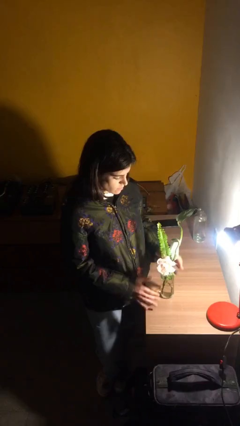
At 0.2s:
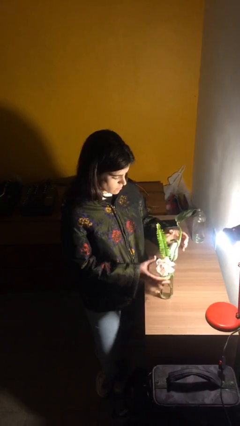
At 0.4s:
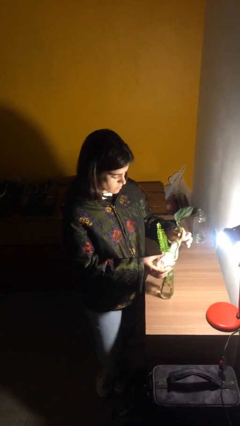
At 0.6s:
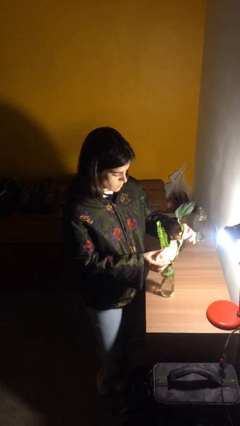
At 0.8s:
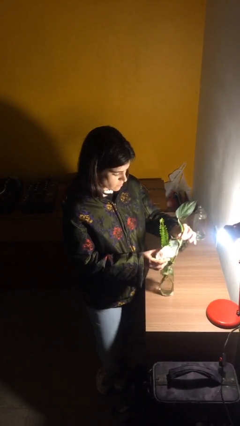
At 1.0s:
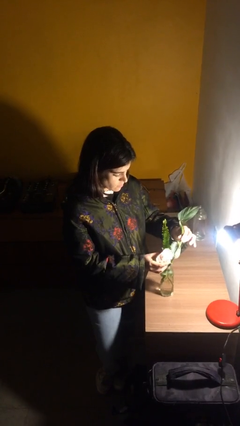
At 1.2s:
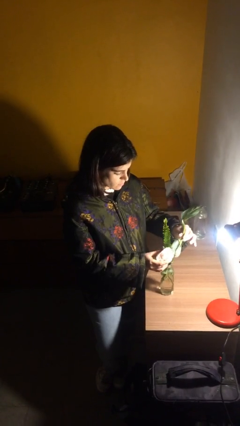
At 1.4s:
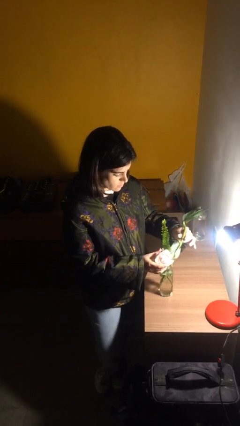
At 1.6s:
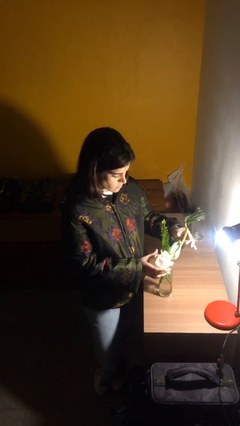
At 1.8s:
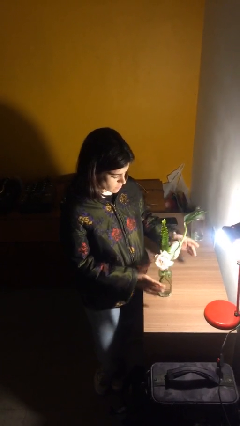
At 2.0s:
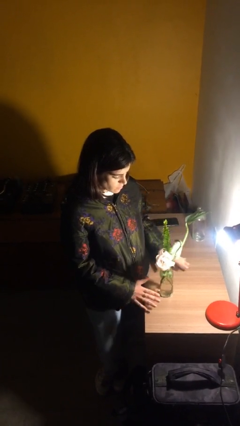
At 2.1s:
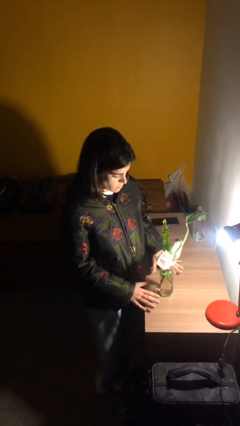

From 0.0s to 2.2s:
person arranges flowers in vase

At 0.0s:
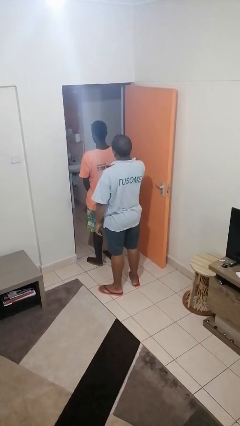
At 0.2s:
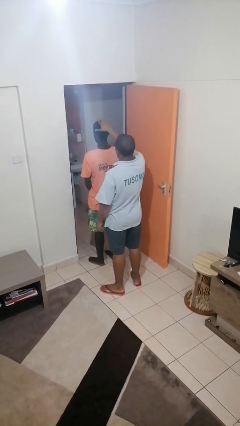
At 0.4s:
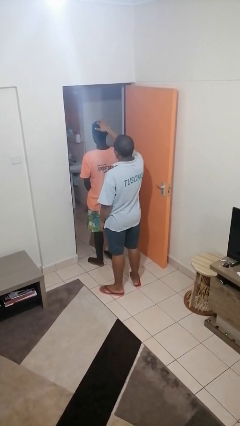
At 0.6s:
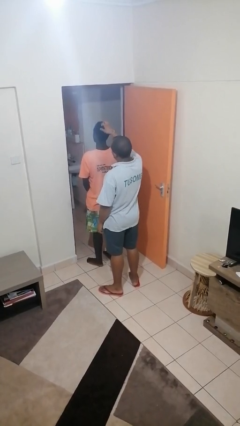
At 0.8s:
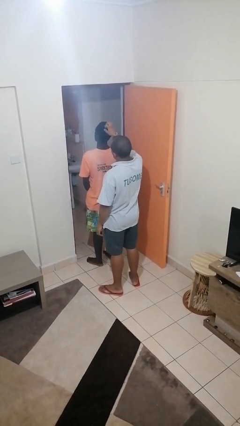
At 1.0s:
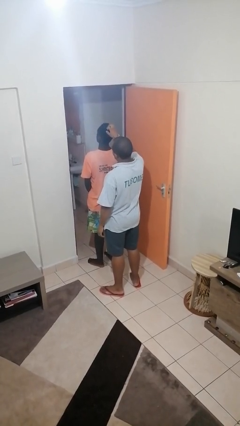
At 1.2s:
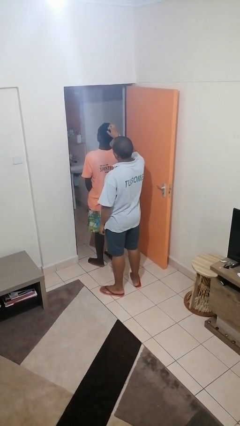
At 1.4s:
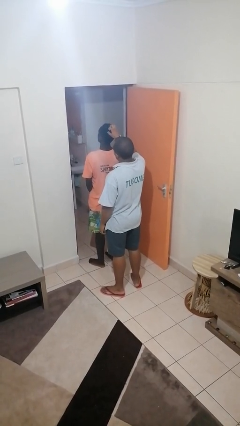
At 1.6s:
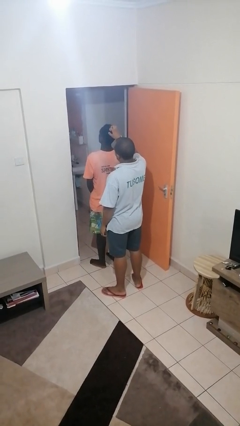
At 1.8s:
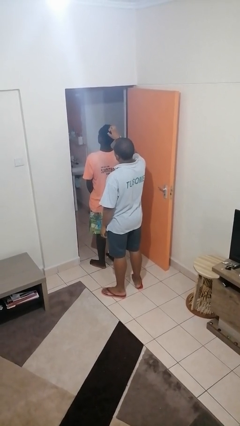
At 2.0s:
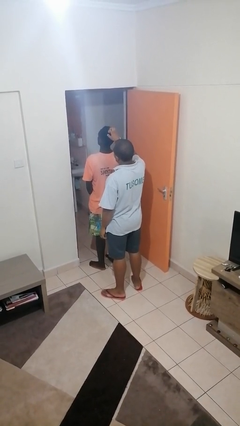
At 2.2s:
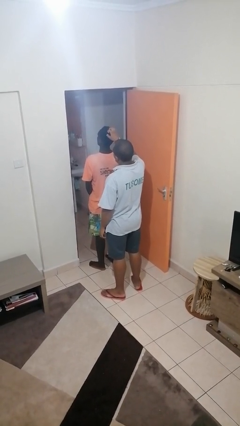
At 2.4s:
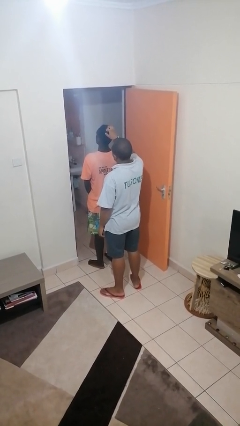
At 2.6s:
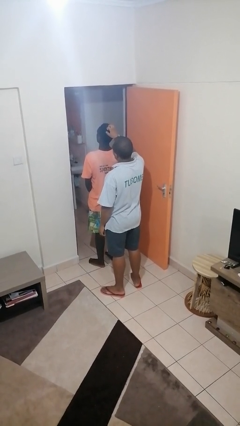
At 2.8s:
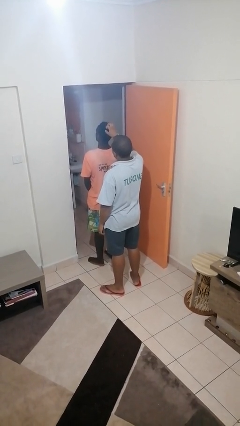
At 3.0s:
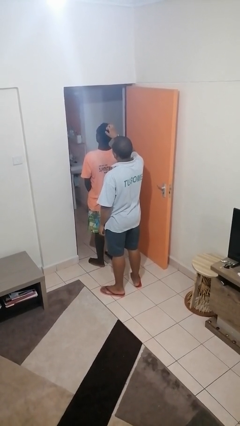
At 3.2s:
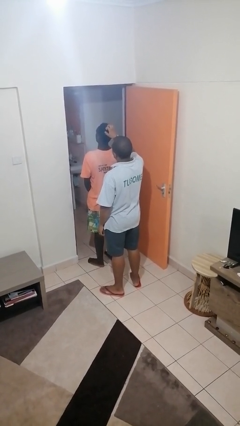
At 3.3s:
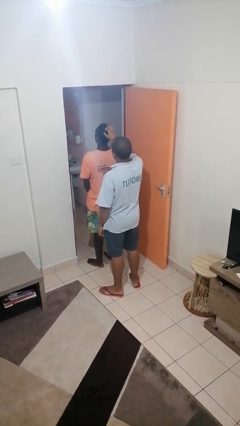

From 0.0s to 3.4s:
person grabs person by hair

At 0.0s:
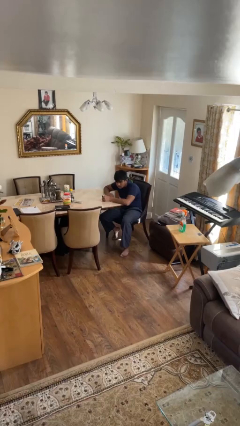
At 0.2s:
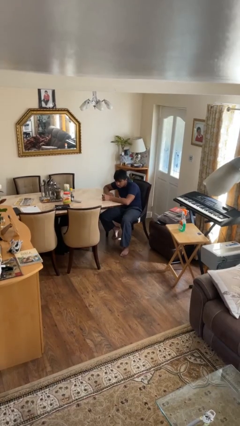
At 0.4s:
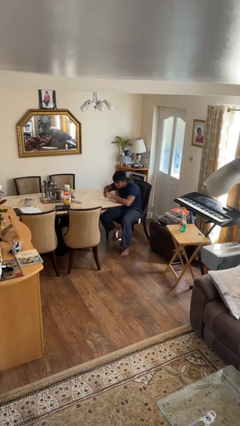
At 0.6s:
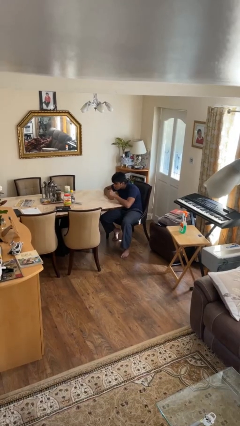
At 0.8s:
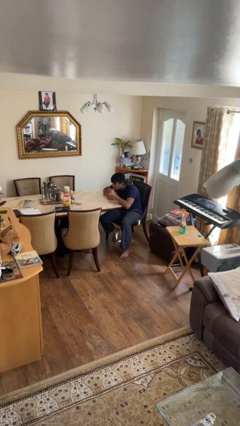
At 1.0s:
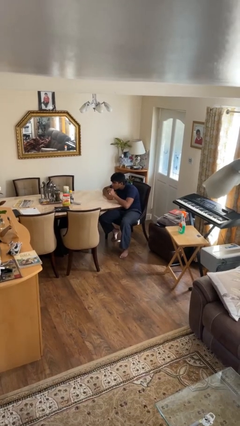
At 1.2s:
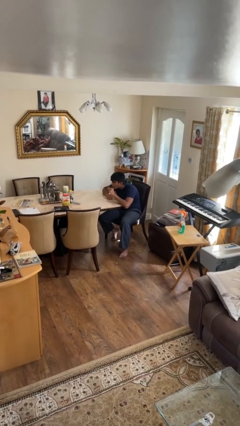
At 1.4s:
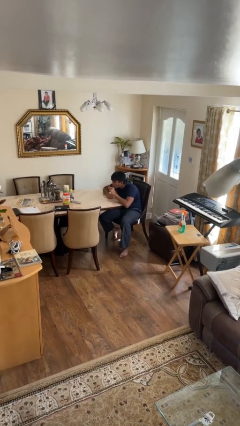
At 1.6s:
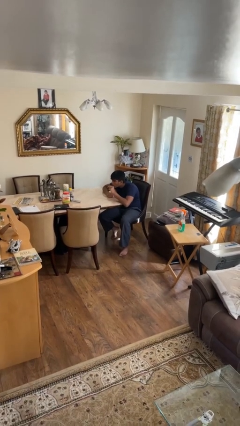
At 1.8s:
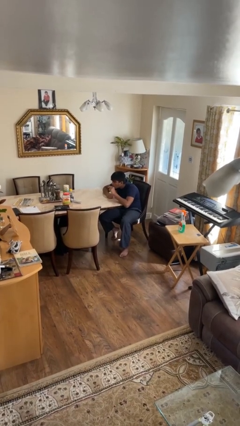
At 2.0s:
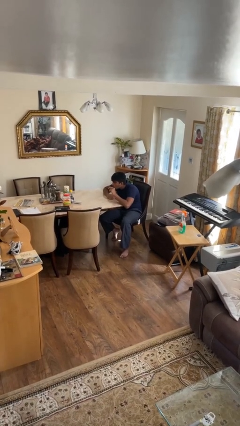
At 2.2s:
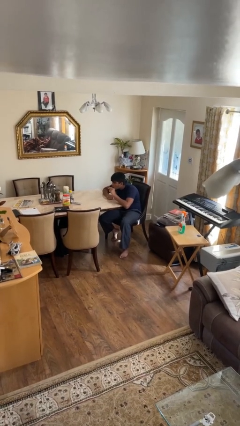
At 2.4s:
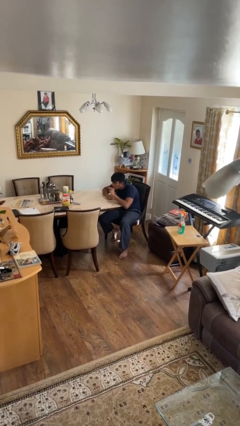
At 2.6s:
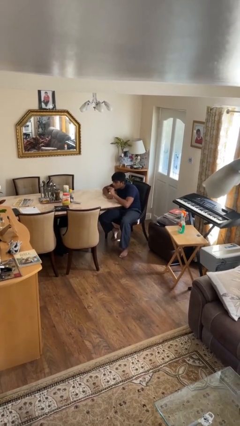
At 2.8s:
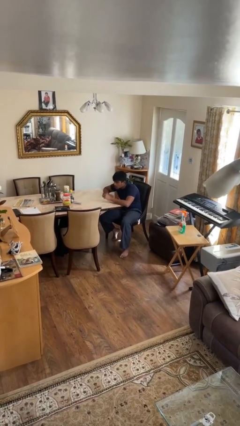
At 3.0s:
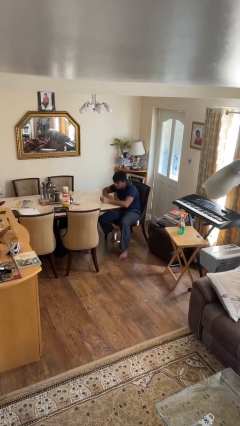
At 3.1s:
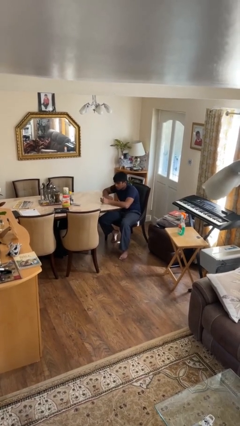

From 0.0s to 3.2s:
person applies lip makeup

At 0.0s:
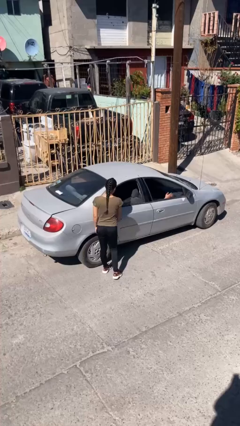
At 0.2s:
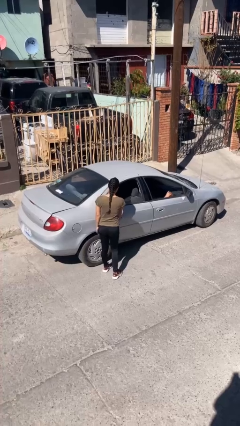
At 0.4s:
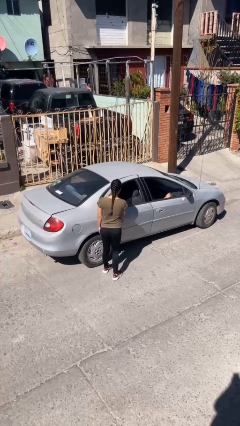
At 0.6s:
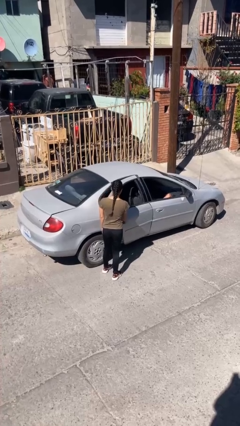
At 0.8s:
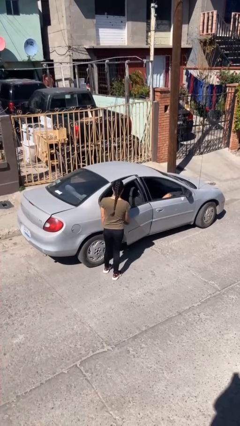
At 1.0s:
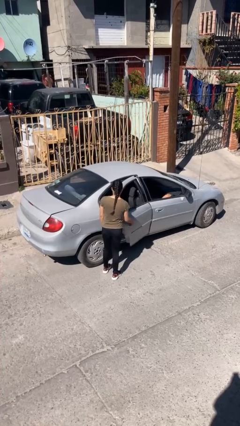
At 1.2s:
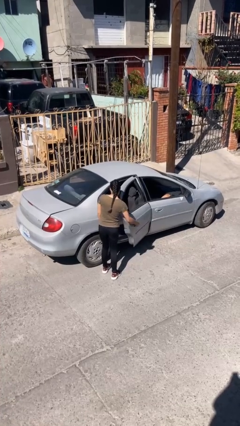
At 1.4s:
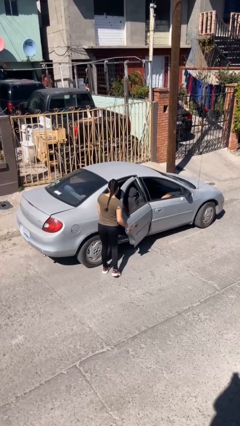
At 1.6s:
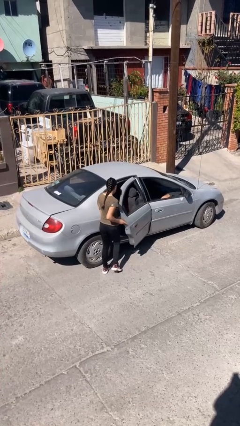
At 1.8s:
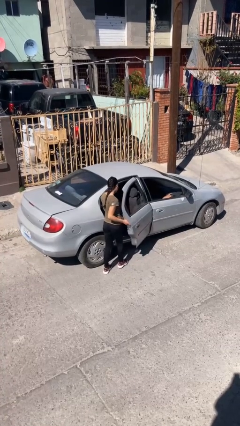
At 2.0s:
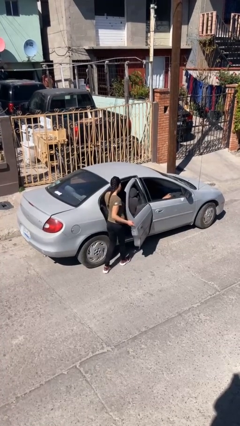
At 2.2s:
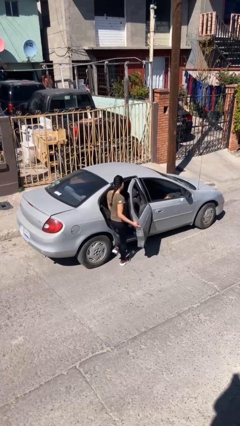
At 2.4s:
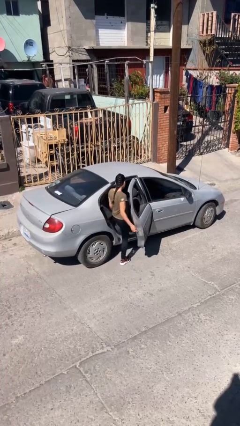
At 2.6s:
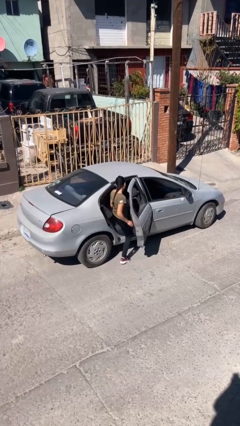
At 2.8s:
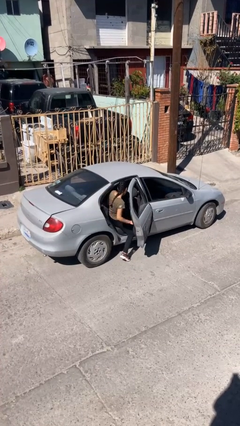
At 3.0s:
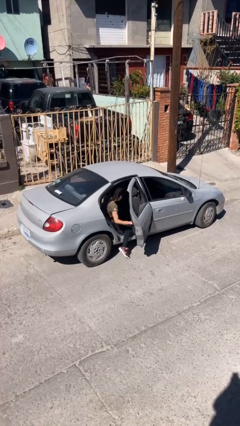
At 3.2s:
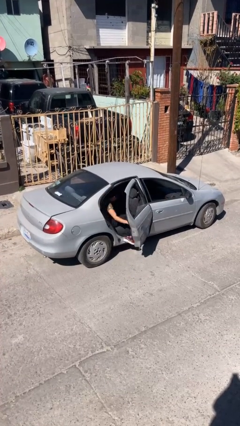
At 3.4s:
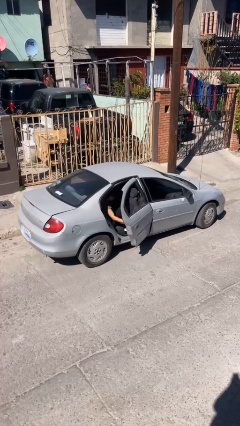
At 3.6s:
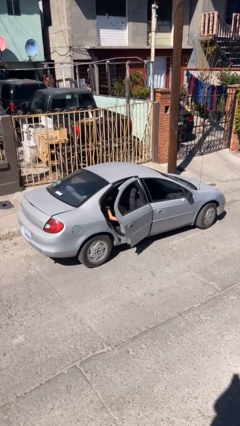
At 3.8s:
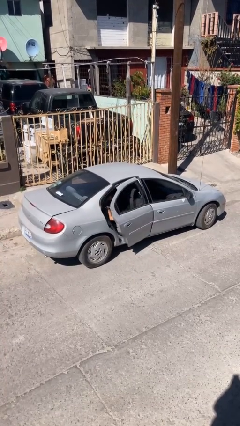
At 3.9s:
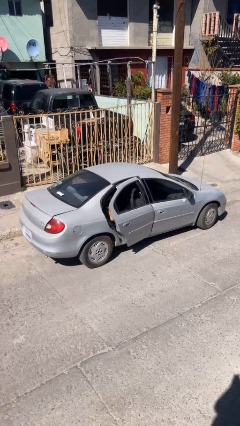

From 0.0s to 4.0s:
car picks up person

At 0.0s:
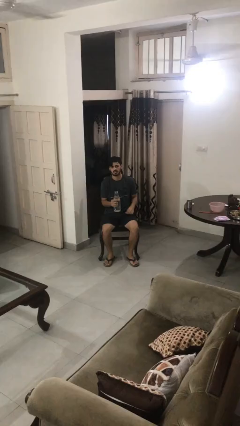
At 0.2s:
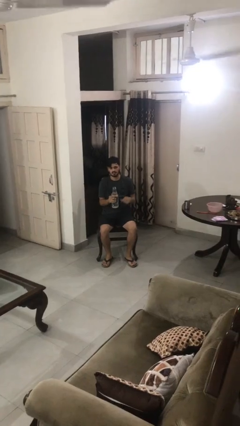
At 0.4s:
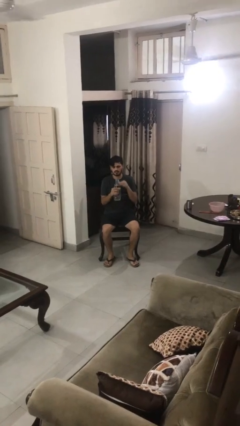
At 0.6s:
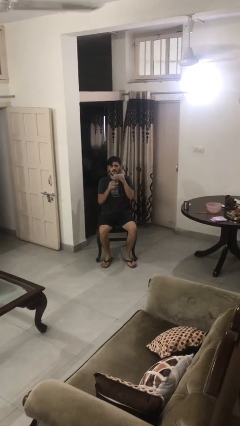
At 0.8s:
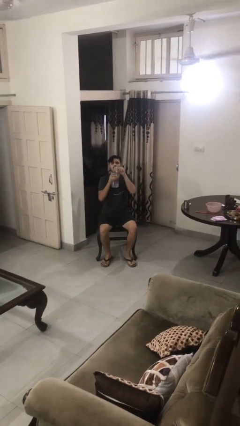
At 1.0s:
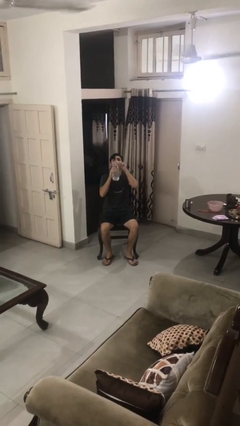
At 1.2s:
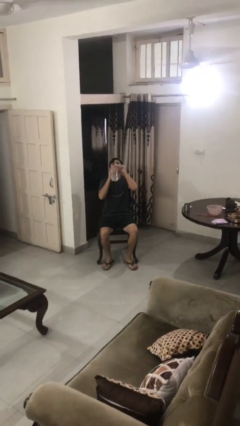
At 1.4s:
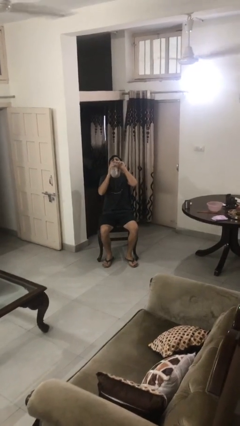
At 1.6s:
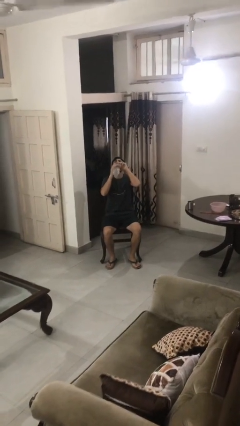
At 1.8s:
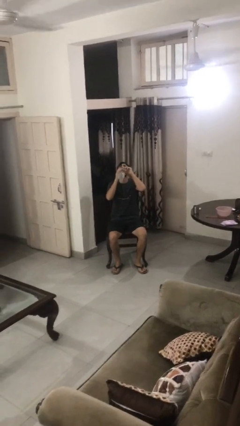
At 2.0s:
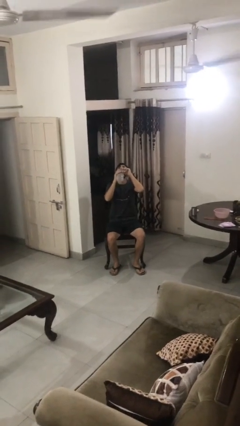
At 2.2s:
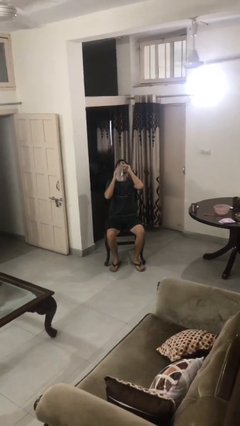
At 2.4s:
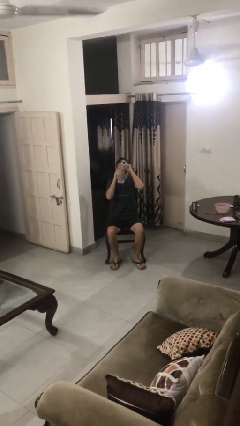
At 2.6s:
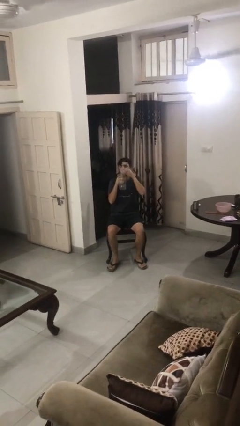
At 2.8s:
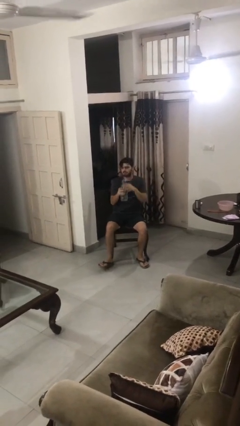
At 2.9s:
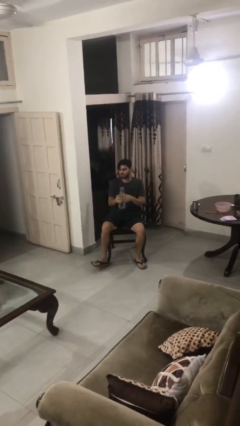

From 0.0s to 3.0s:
person drinks from bottle

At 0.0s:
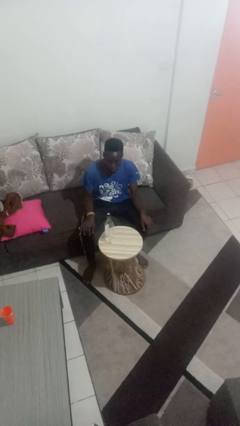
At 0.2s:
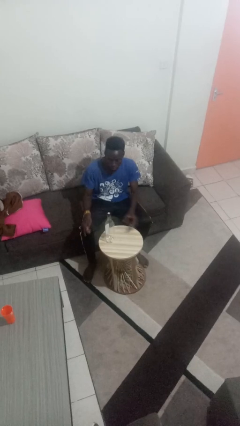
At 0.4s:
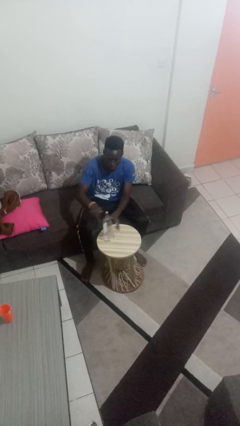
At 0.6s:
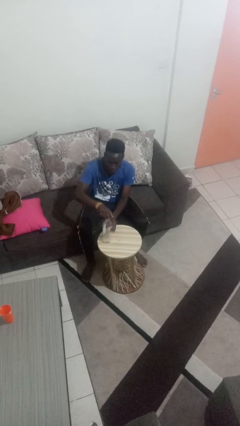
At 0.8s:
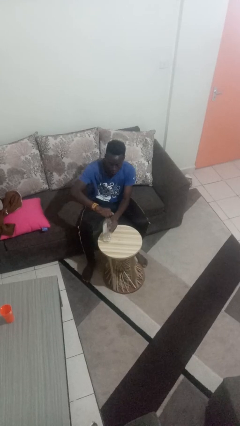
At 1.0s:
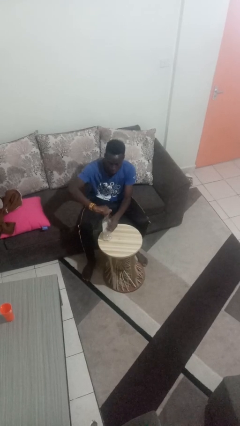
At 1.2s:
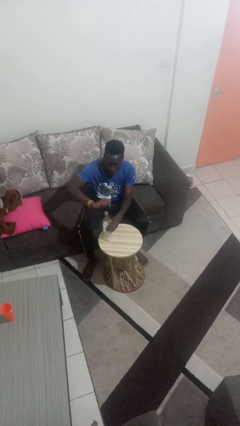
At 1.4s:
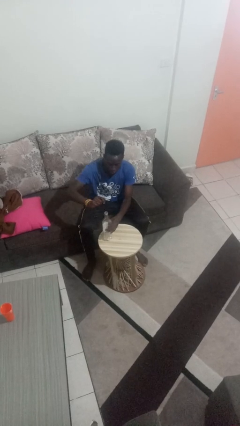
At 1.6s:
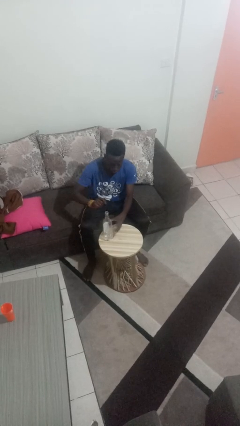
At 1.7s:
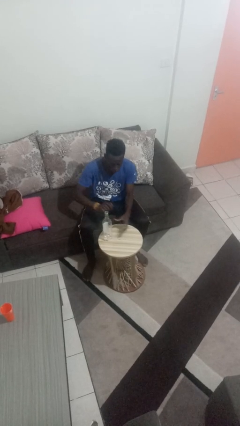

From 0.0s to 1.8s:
person unscrews lid from bottle
